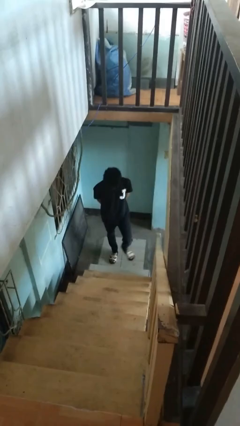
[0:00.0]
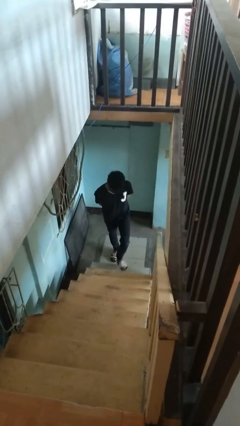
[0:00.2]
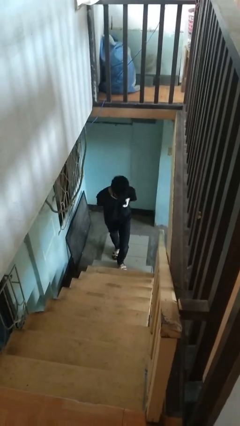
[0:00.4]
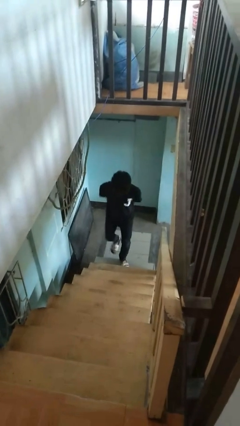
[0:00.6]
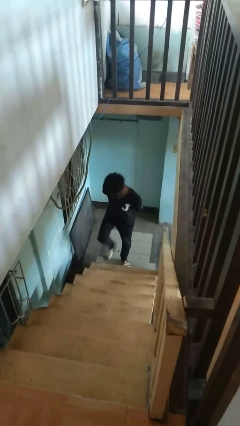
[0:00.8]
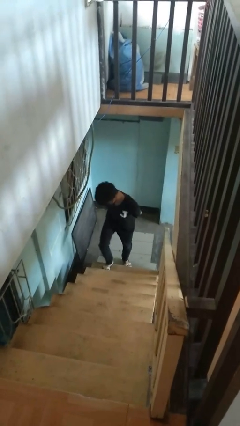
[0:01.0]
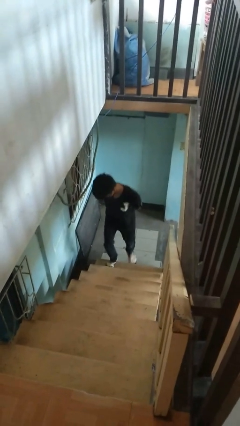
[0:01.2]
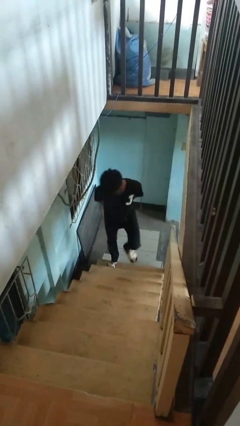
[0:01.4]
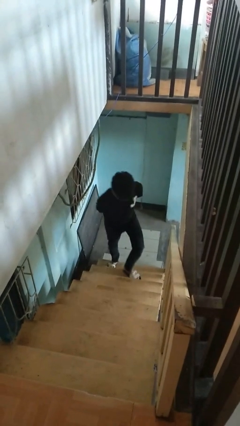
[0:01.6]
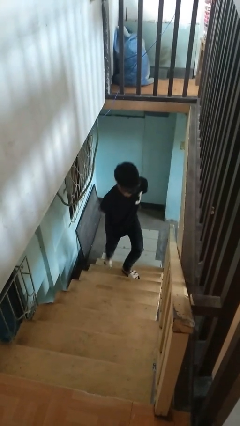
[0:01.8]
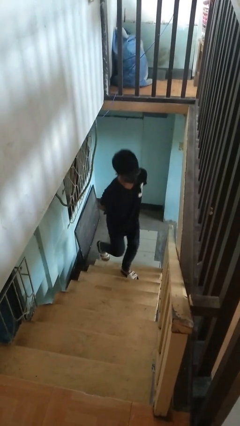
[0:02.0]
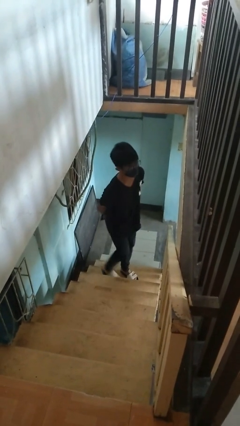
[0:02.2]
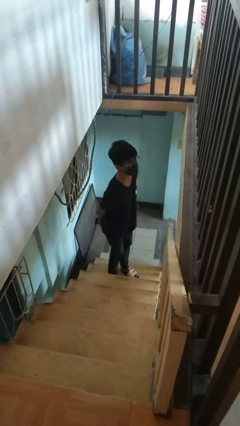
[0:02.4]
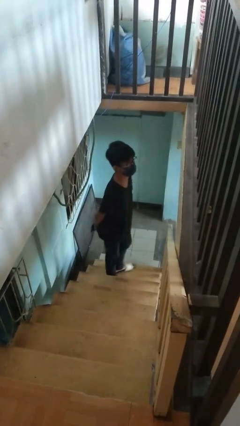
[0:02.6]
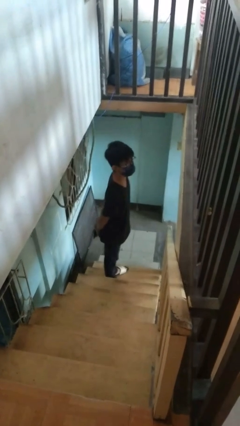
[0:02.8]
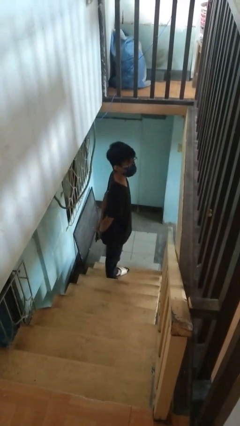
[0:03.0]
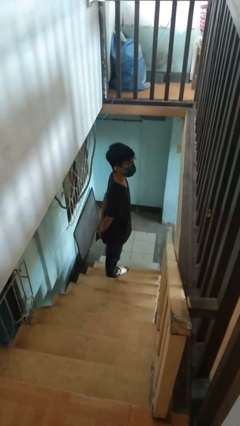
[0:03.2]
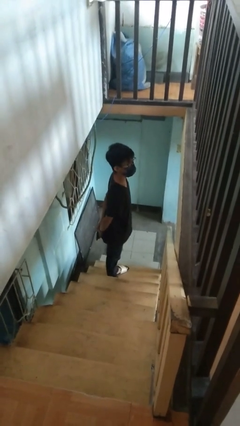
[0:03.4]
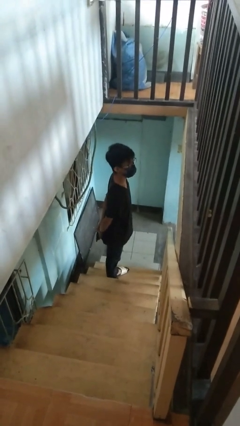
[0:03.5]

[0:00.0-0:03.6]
person climbs up ladder

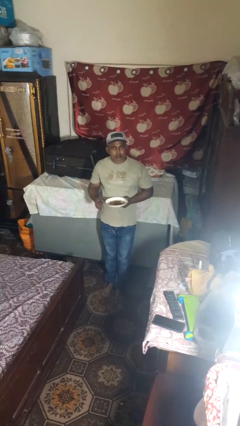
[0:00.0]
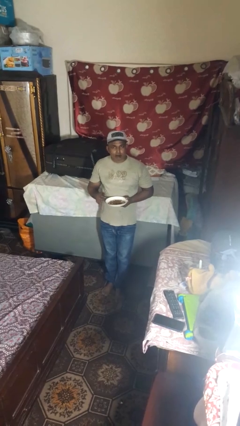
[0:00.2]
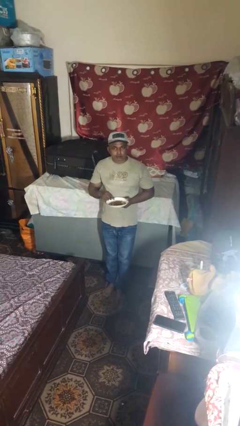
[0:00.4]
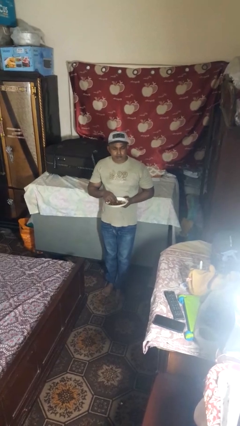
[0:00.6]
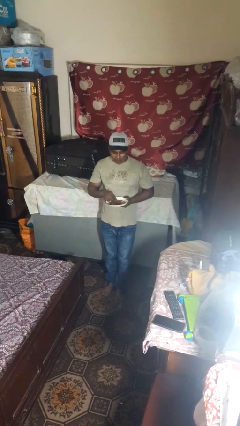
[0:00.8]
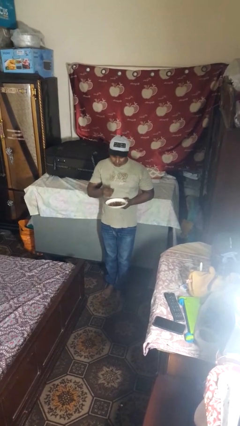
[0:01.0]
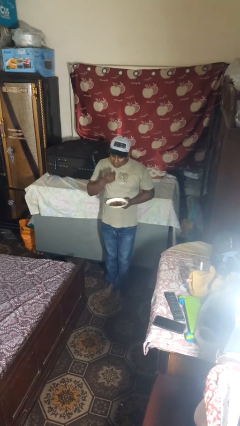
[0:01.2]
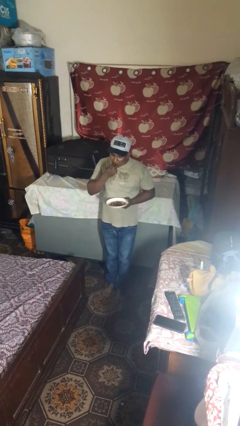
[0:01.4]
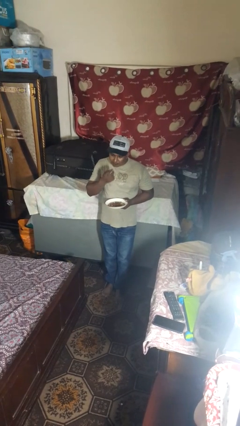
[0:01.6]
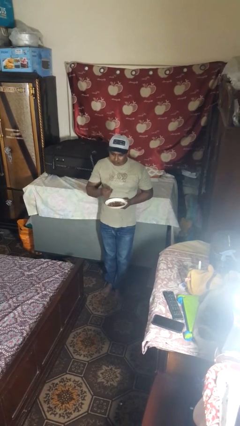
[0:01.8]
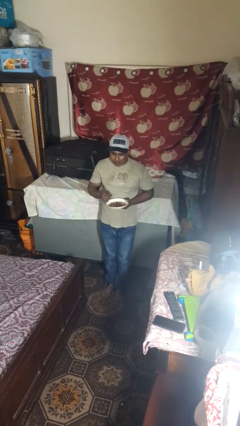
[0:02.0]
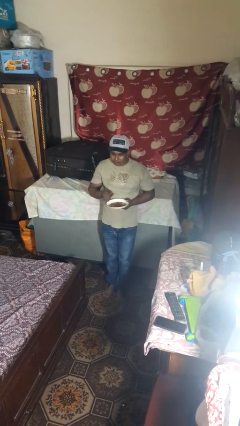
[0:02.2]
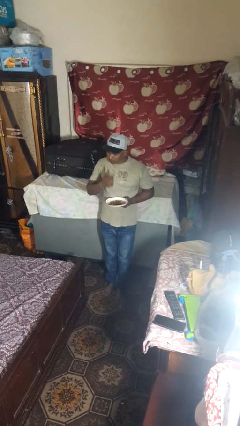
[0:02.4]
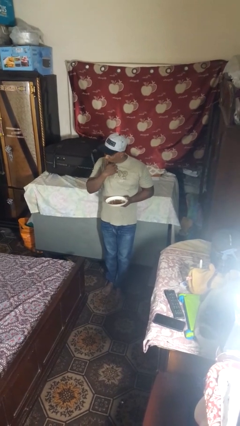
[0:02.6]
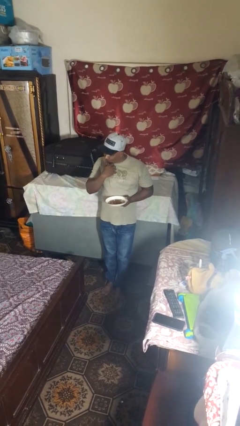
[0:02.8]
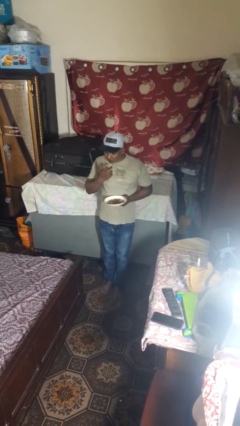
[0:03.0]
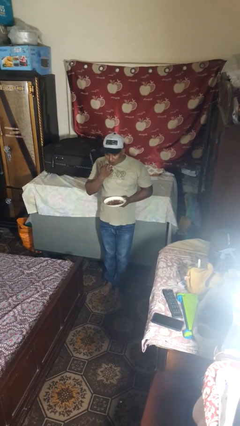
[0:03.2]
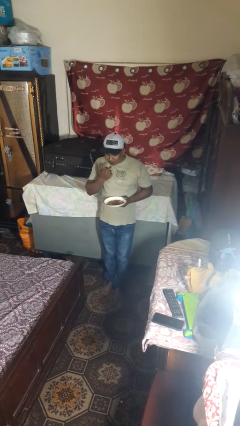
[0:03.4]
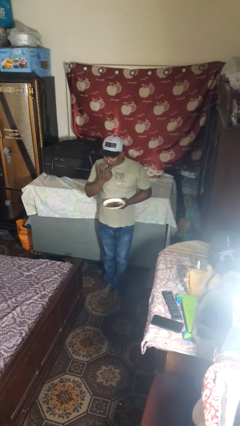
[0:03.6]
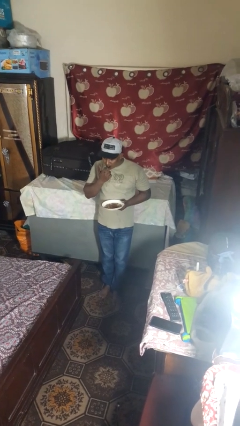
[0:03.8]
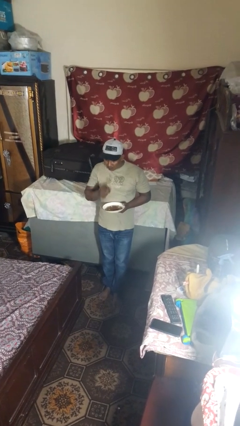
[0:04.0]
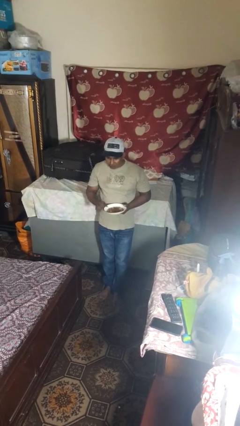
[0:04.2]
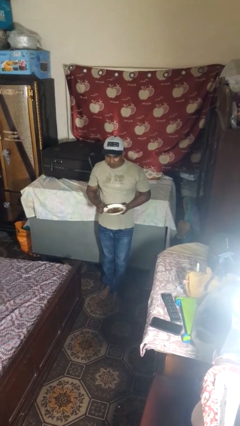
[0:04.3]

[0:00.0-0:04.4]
person licks fingers

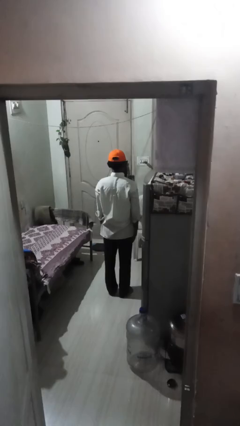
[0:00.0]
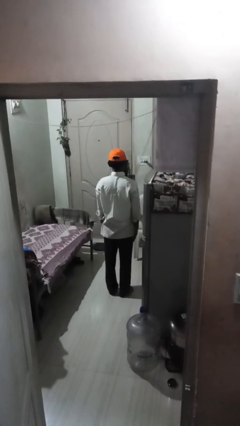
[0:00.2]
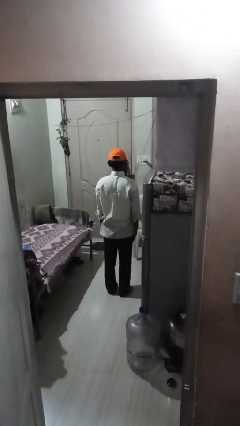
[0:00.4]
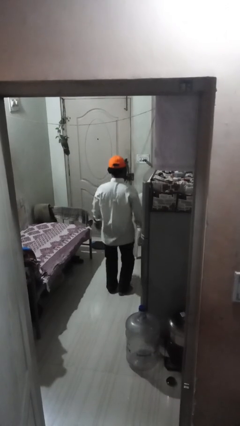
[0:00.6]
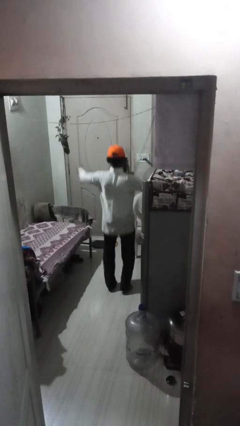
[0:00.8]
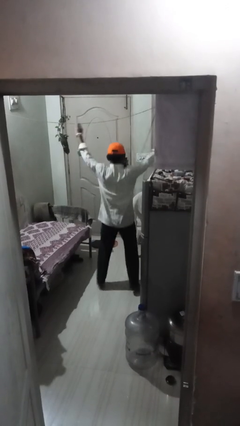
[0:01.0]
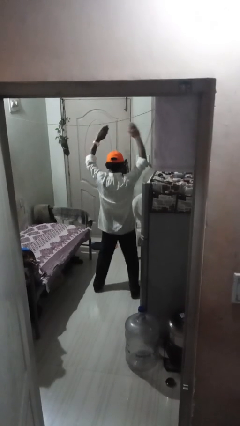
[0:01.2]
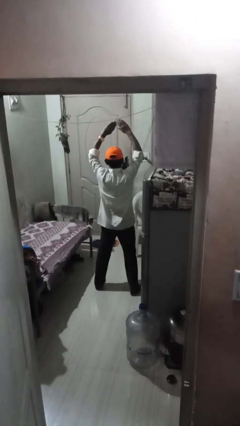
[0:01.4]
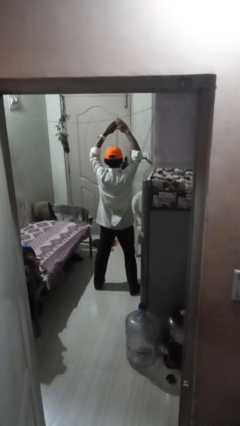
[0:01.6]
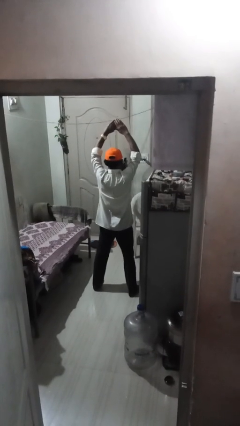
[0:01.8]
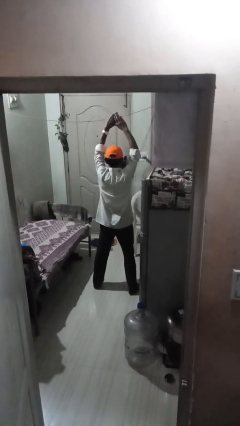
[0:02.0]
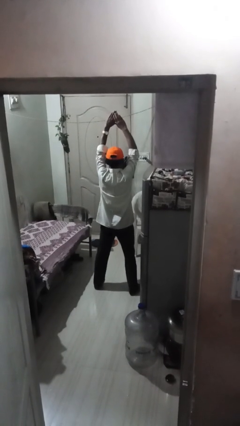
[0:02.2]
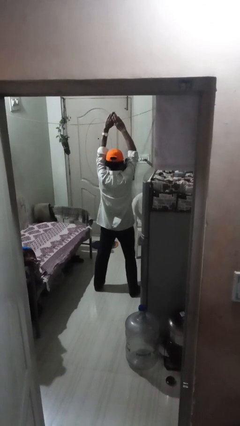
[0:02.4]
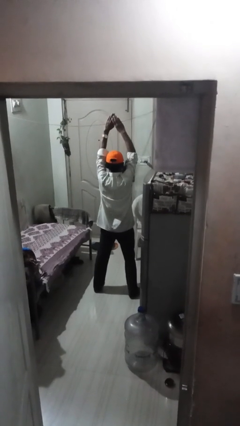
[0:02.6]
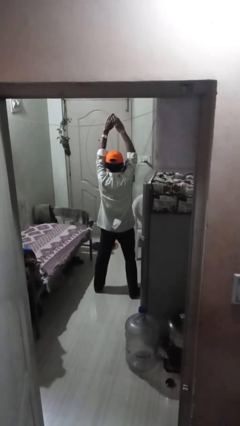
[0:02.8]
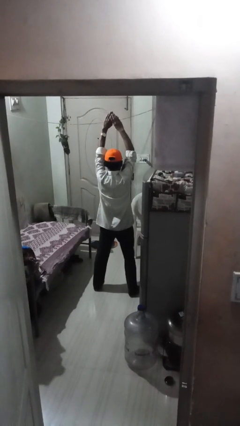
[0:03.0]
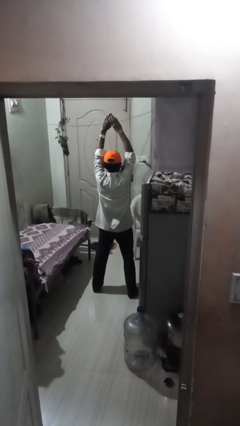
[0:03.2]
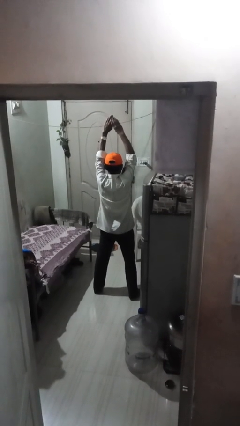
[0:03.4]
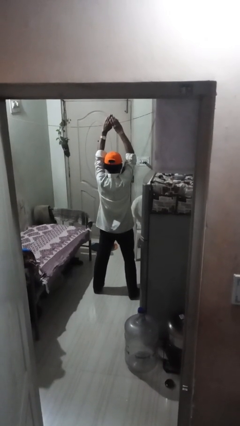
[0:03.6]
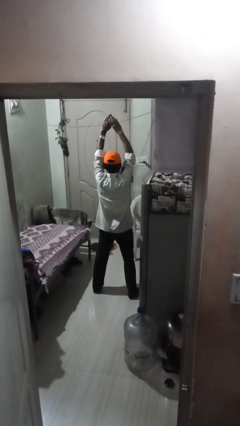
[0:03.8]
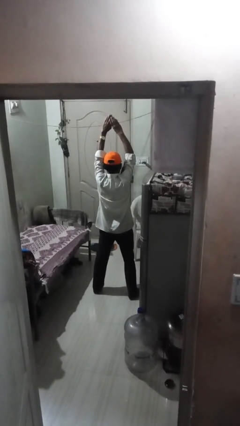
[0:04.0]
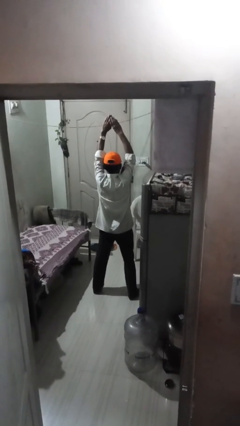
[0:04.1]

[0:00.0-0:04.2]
person exercises with jumping jacks

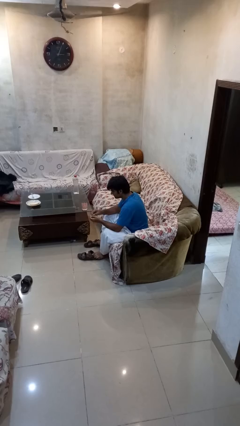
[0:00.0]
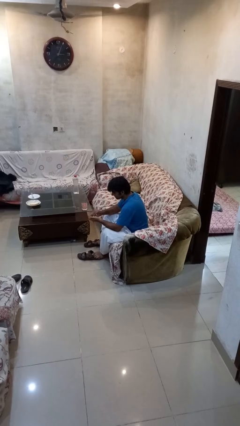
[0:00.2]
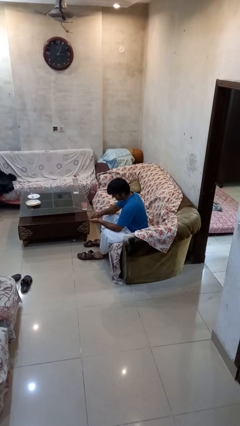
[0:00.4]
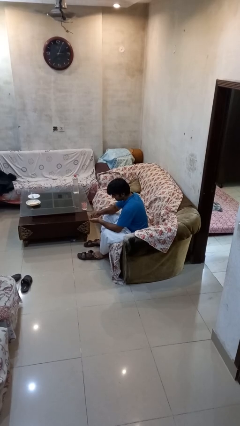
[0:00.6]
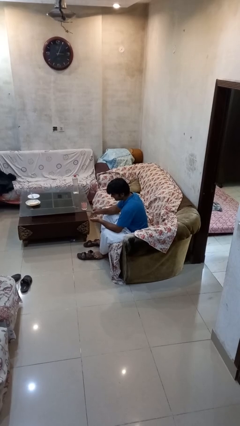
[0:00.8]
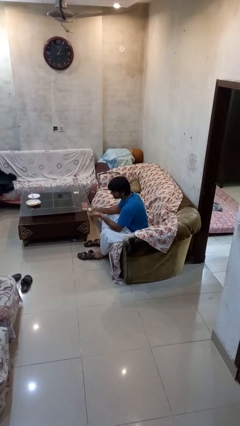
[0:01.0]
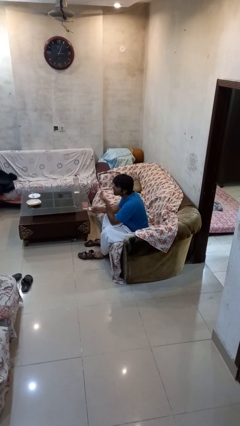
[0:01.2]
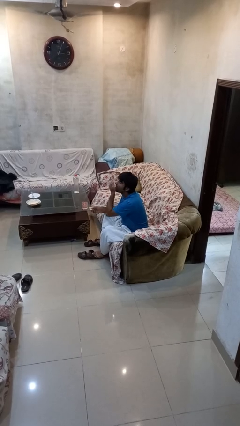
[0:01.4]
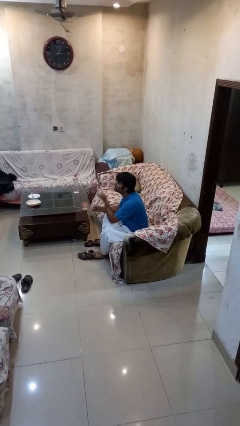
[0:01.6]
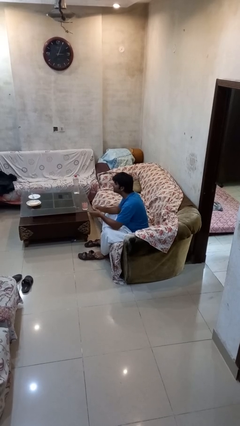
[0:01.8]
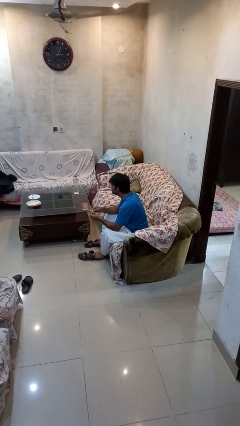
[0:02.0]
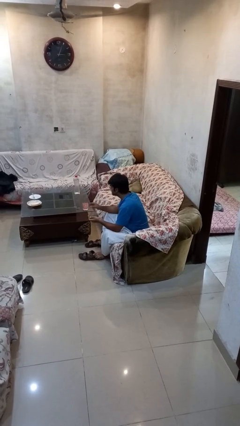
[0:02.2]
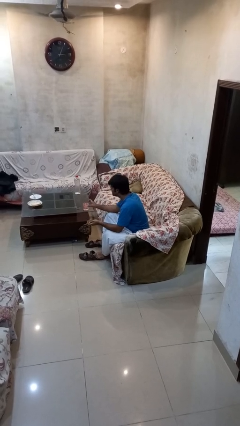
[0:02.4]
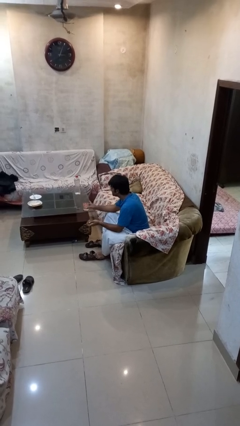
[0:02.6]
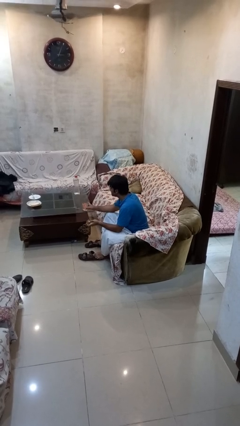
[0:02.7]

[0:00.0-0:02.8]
person takes medicine pills

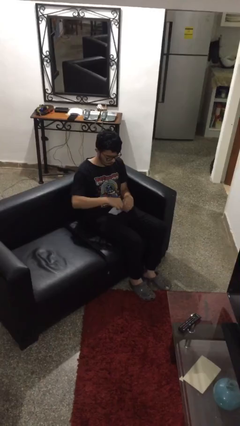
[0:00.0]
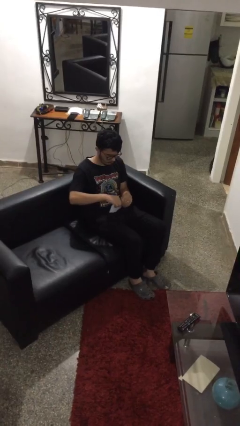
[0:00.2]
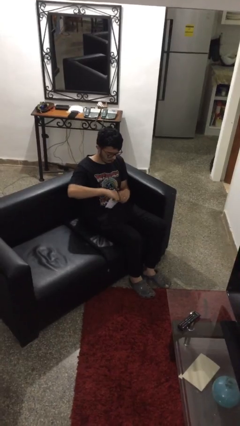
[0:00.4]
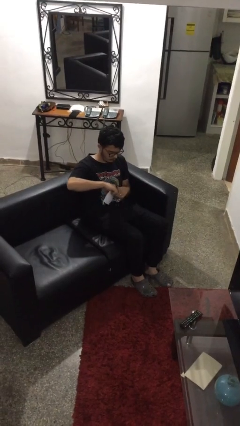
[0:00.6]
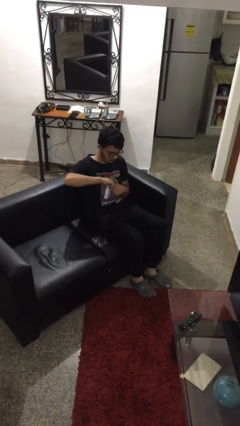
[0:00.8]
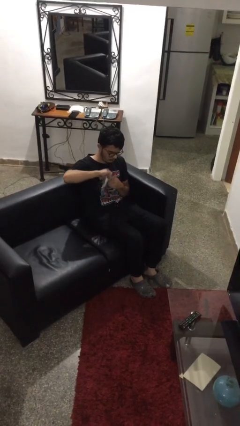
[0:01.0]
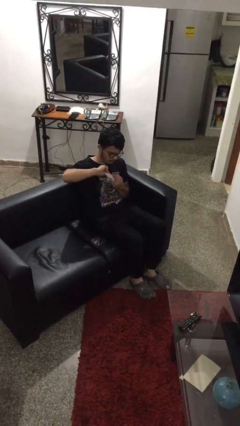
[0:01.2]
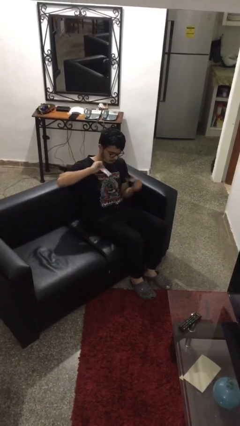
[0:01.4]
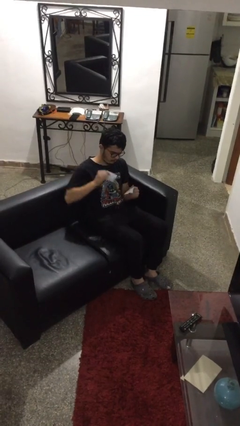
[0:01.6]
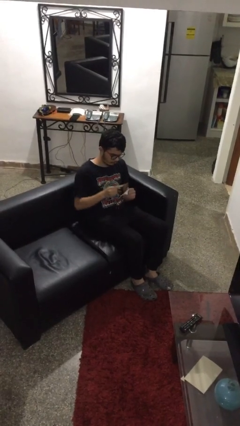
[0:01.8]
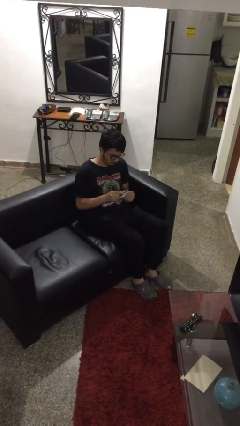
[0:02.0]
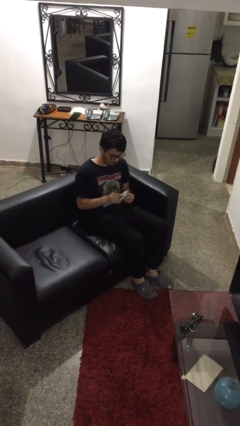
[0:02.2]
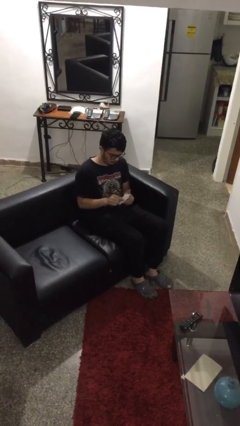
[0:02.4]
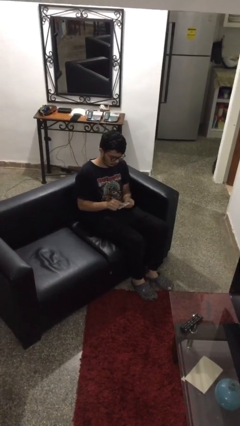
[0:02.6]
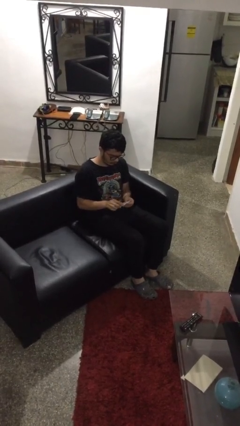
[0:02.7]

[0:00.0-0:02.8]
person tears paper

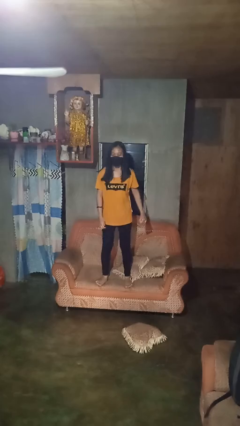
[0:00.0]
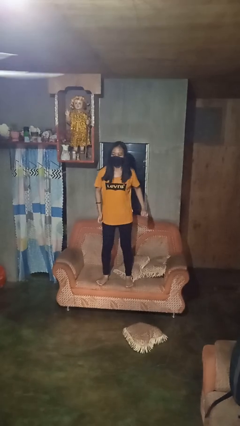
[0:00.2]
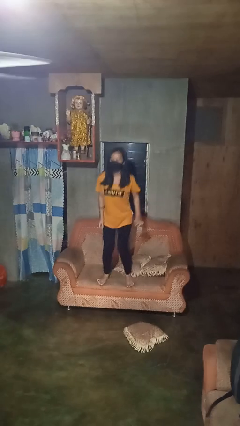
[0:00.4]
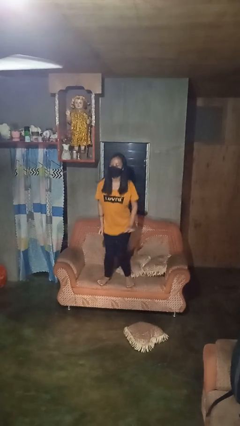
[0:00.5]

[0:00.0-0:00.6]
person jumps on couch
